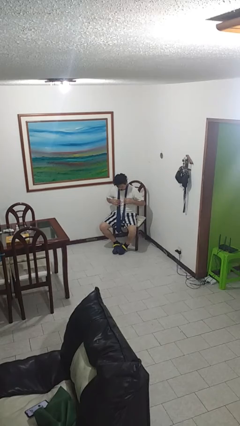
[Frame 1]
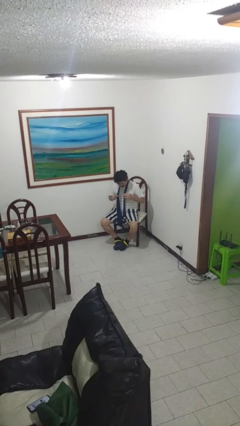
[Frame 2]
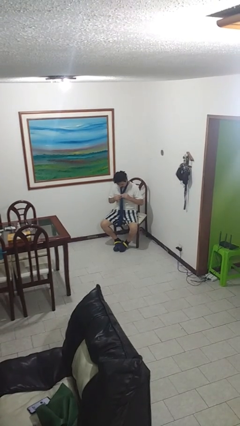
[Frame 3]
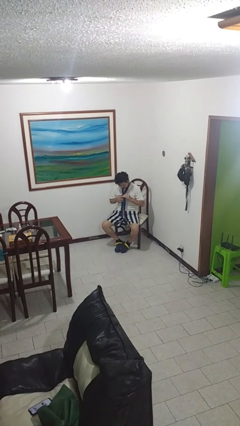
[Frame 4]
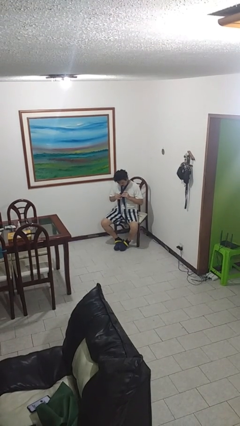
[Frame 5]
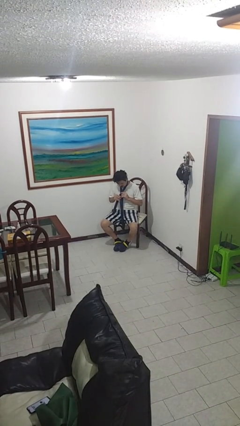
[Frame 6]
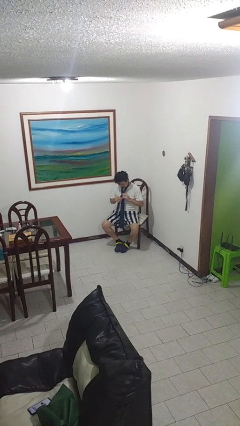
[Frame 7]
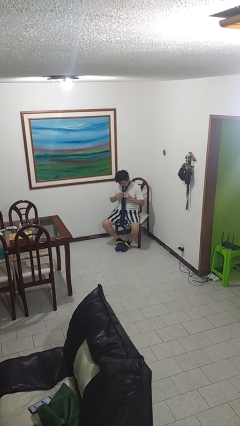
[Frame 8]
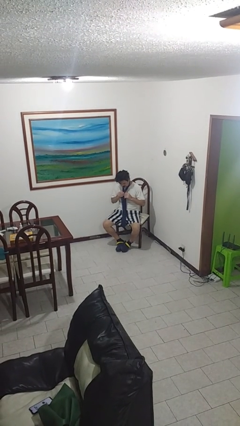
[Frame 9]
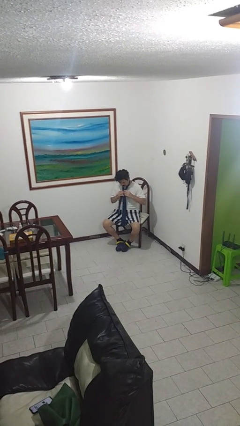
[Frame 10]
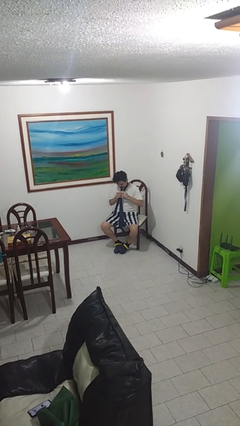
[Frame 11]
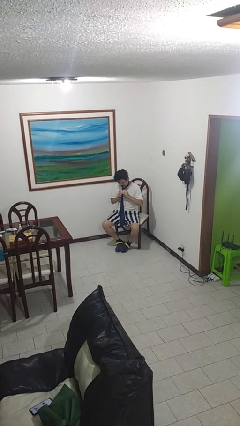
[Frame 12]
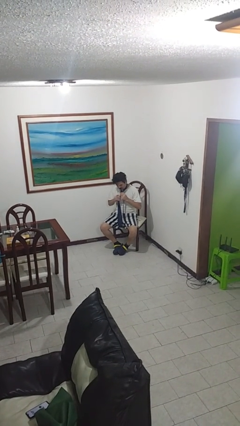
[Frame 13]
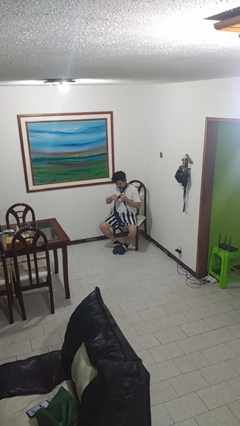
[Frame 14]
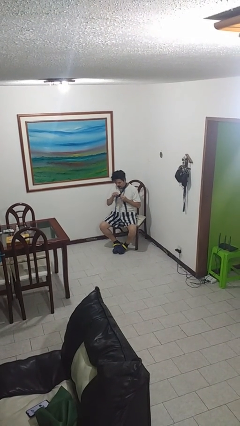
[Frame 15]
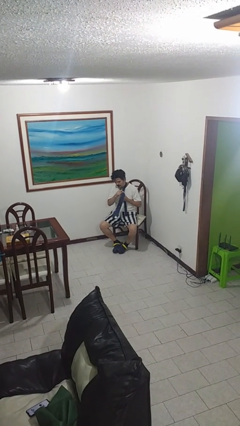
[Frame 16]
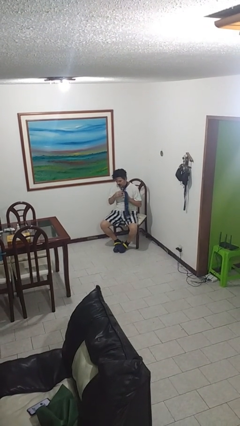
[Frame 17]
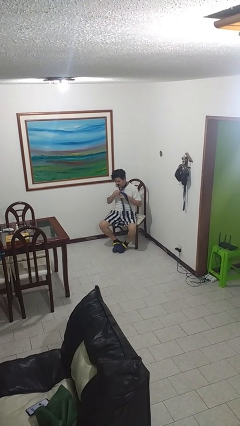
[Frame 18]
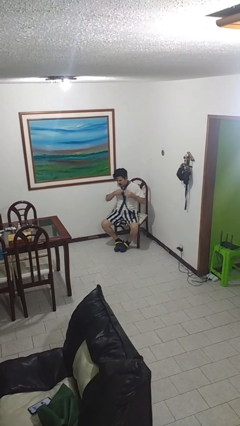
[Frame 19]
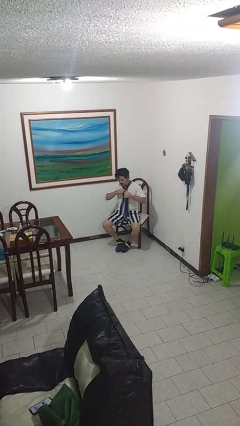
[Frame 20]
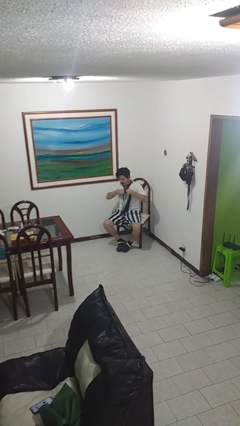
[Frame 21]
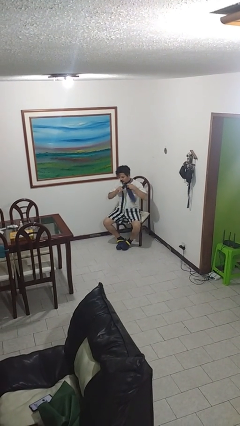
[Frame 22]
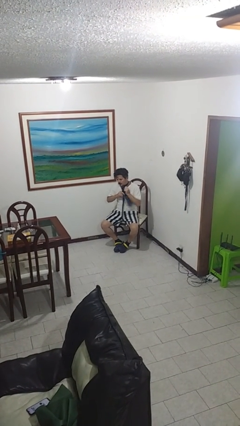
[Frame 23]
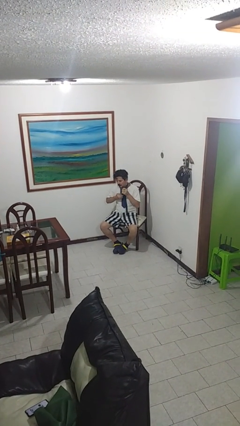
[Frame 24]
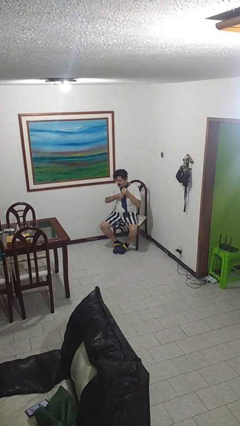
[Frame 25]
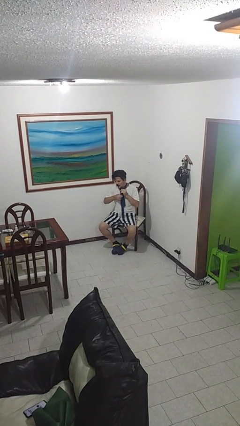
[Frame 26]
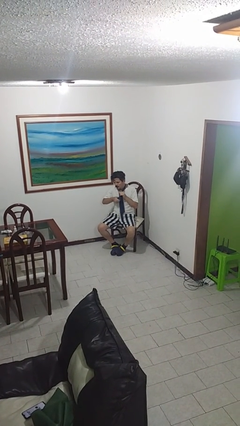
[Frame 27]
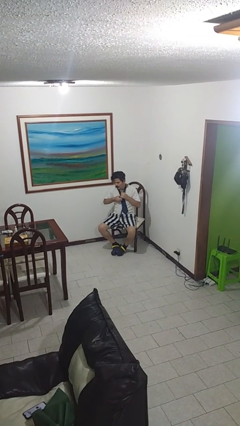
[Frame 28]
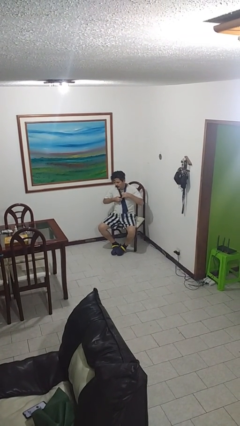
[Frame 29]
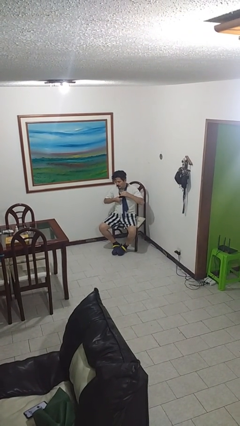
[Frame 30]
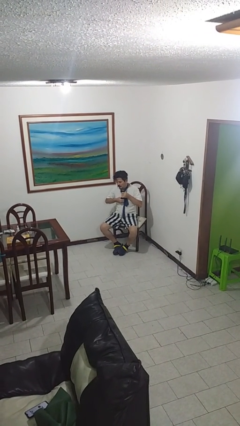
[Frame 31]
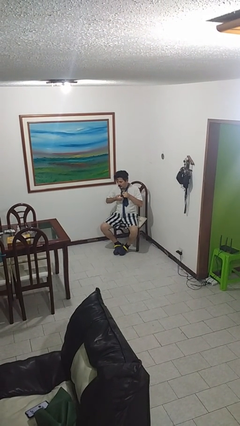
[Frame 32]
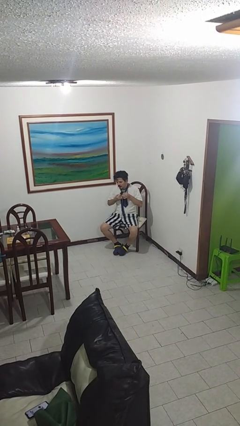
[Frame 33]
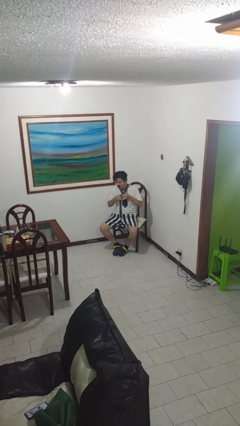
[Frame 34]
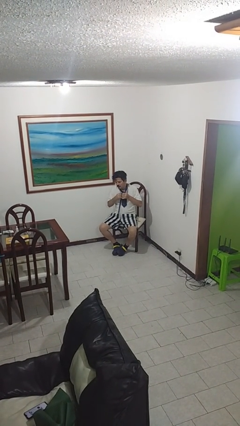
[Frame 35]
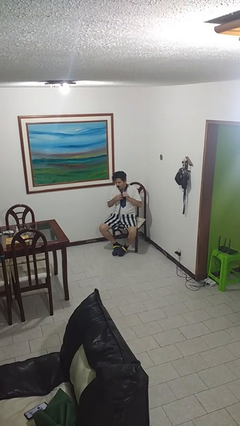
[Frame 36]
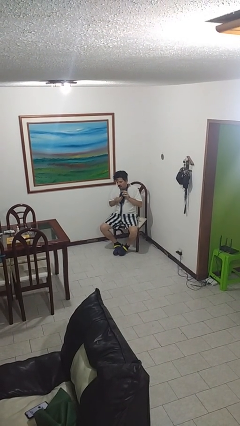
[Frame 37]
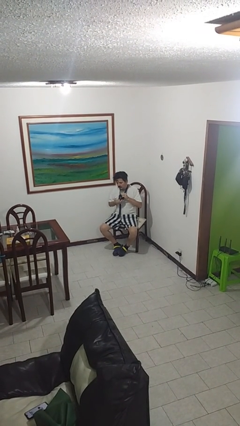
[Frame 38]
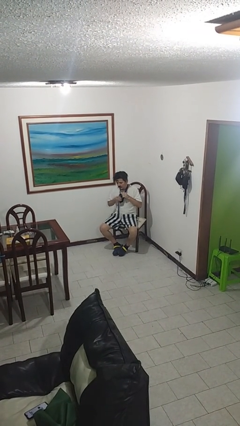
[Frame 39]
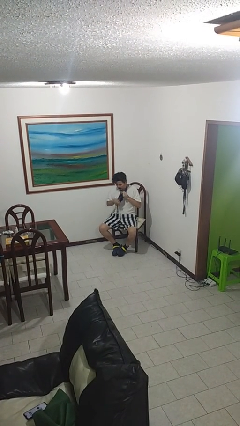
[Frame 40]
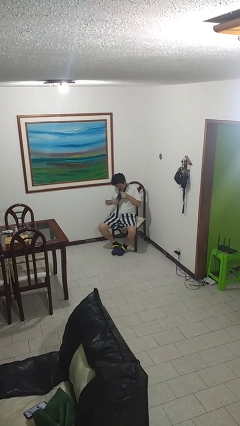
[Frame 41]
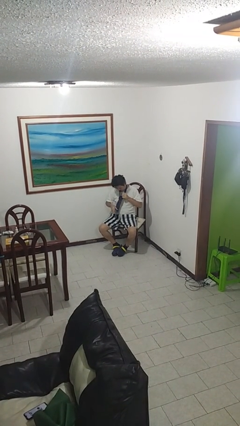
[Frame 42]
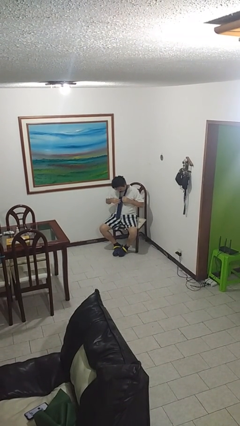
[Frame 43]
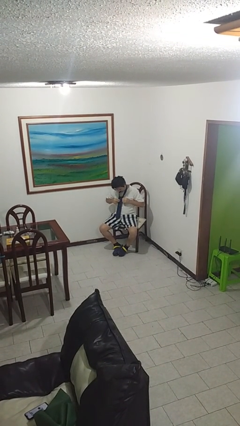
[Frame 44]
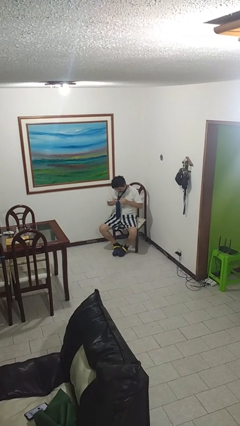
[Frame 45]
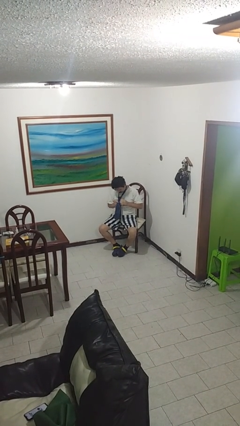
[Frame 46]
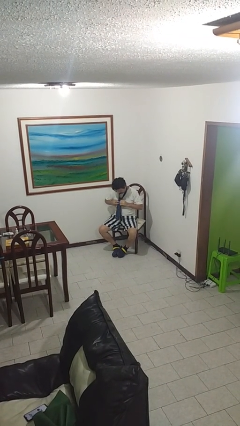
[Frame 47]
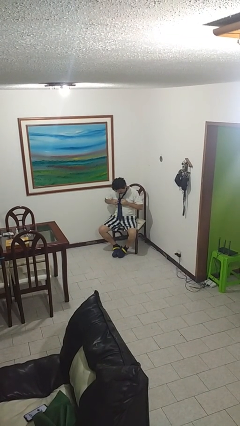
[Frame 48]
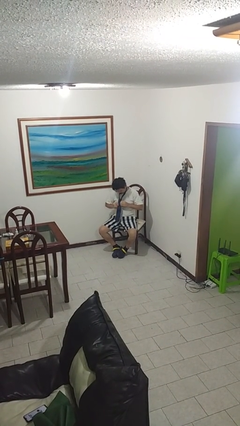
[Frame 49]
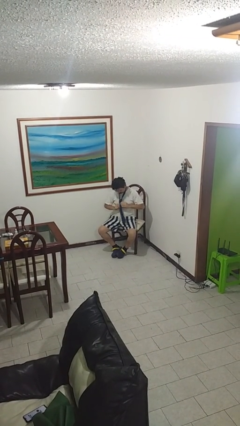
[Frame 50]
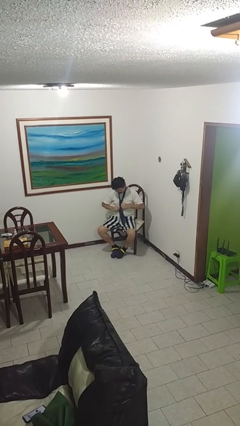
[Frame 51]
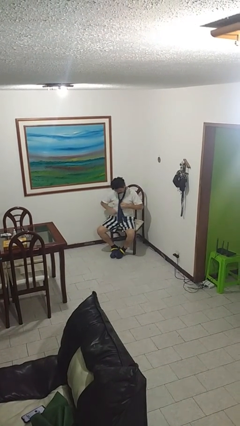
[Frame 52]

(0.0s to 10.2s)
person puts on necktie

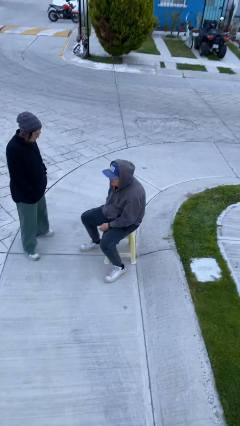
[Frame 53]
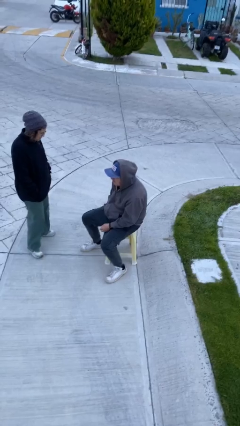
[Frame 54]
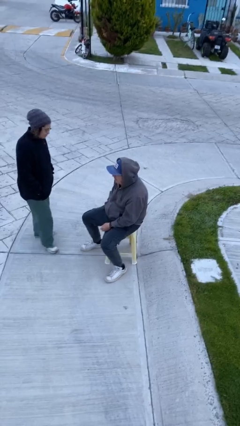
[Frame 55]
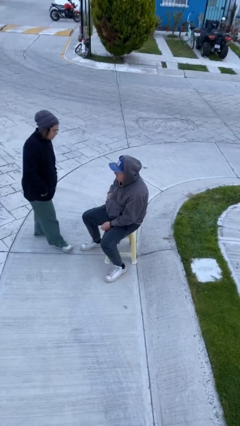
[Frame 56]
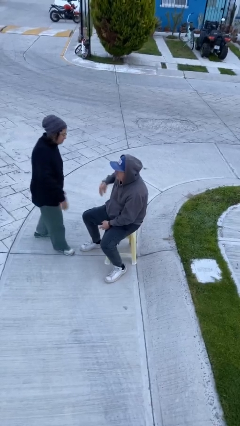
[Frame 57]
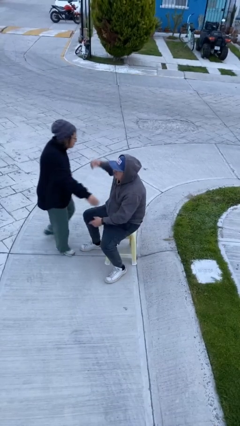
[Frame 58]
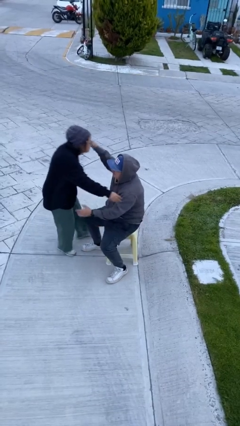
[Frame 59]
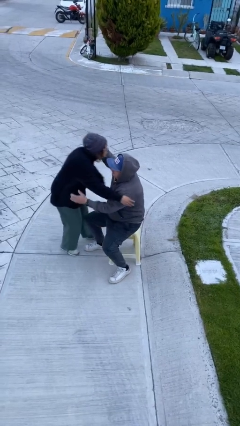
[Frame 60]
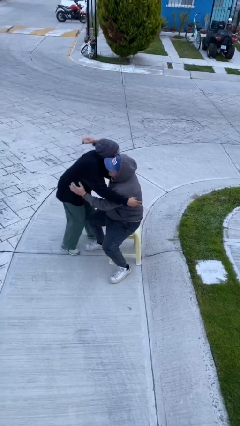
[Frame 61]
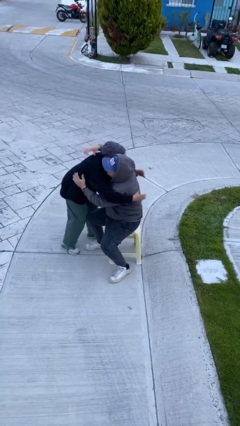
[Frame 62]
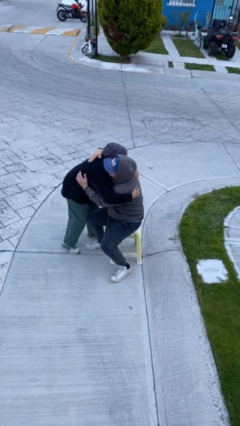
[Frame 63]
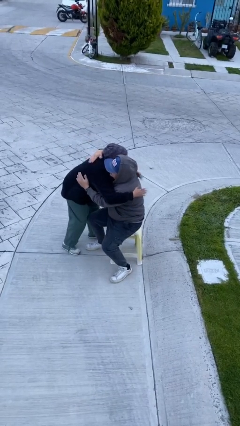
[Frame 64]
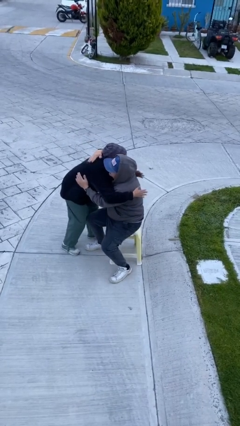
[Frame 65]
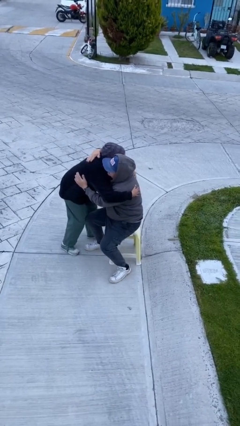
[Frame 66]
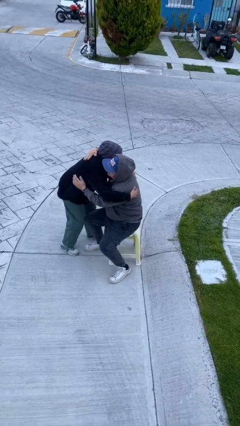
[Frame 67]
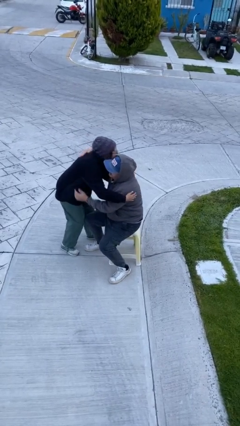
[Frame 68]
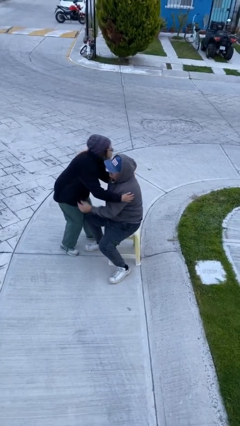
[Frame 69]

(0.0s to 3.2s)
person embraces person

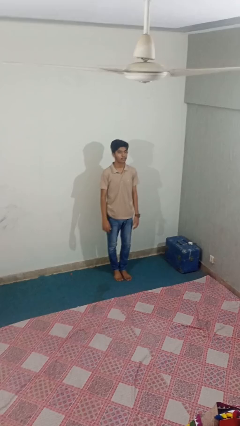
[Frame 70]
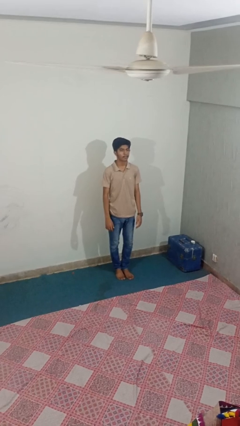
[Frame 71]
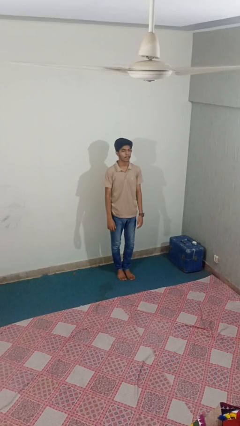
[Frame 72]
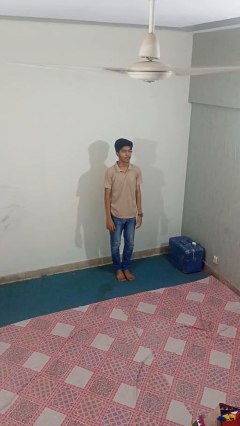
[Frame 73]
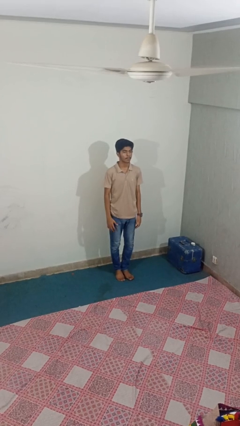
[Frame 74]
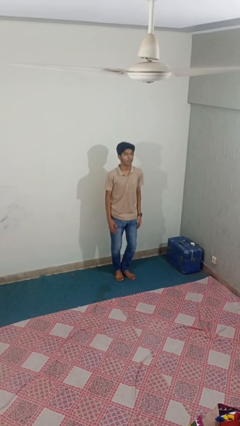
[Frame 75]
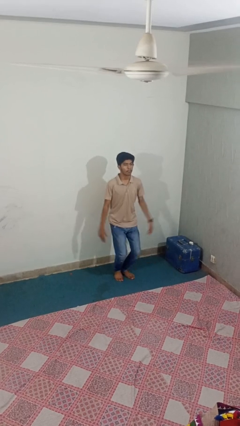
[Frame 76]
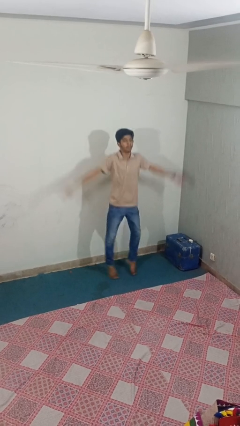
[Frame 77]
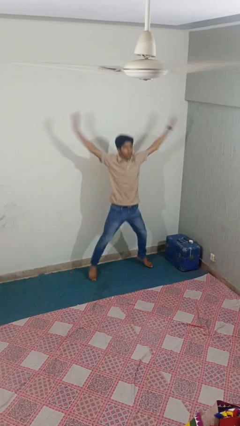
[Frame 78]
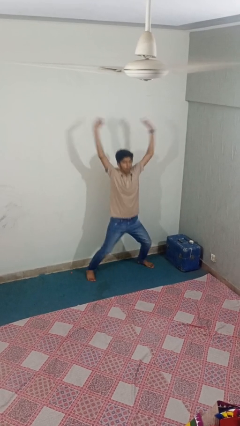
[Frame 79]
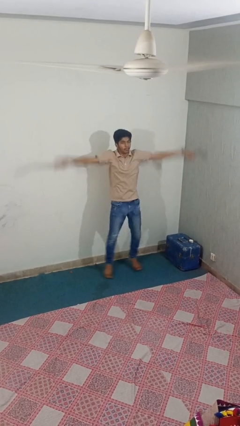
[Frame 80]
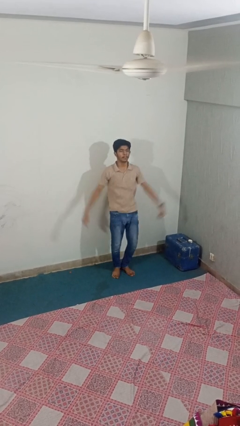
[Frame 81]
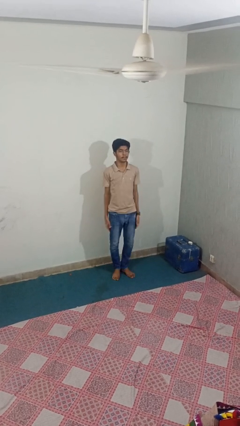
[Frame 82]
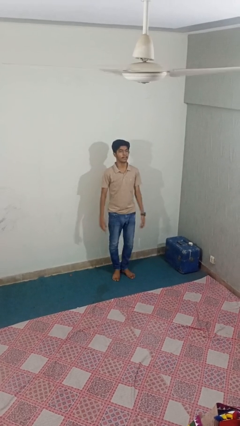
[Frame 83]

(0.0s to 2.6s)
person exercises with jumping jacks

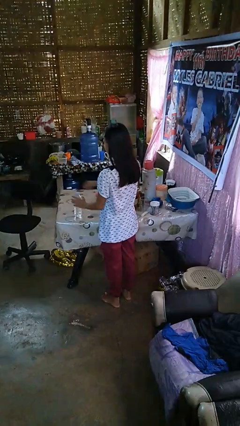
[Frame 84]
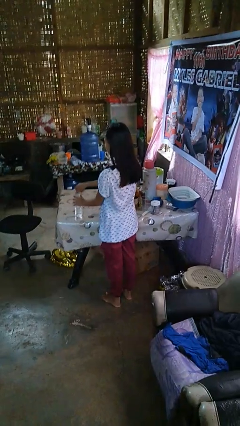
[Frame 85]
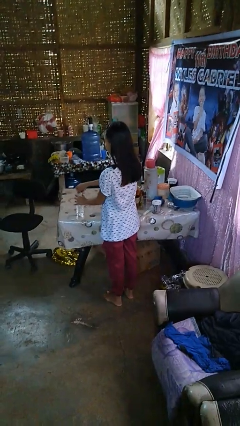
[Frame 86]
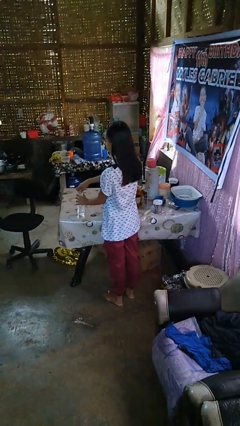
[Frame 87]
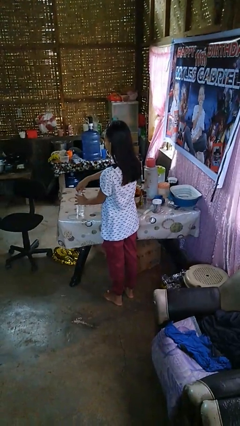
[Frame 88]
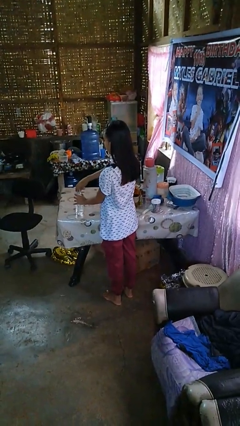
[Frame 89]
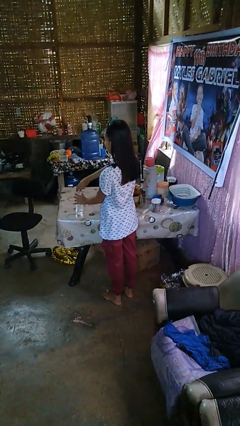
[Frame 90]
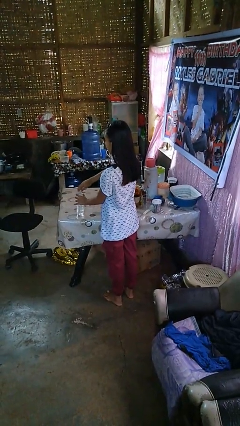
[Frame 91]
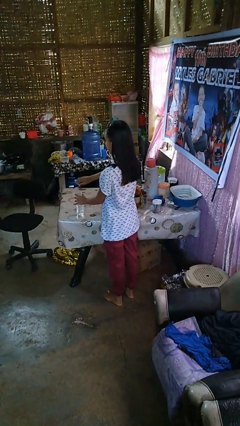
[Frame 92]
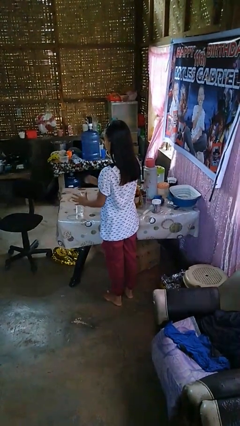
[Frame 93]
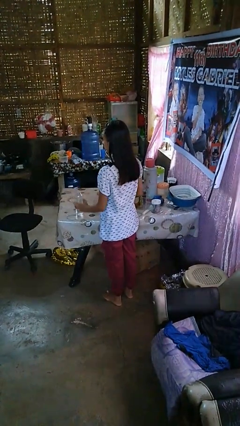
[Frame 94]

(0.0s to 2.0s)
person unscrews lid from bottle
